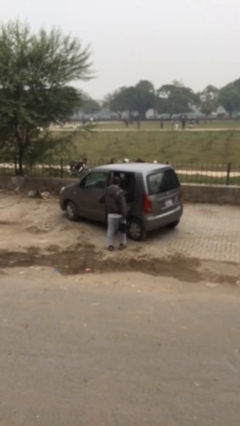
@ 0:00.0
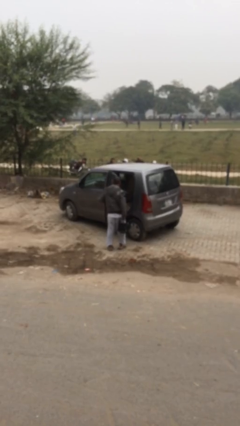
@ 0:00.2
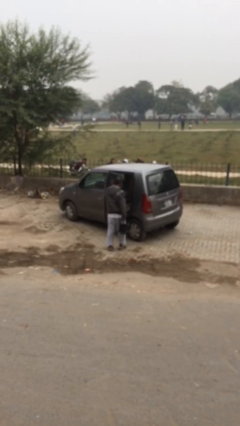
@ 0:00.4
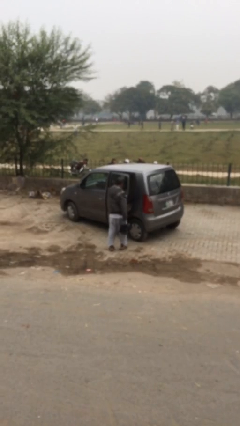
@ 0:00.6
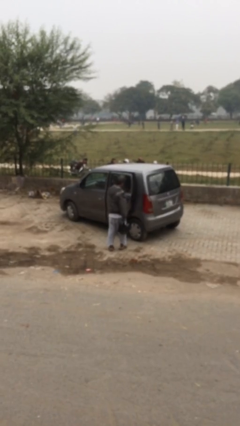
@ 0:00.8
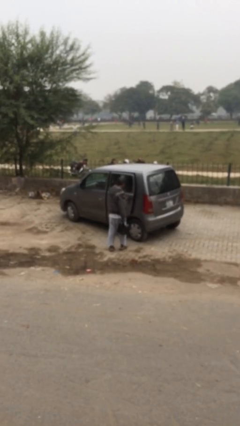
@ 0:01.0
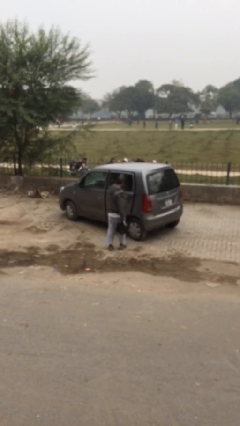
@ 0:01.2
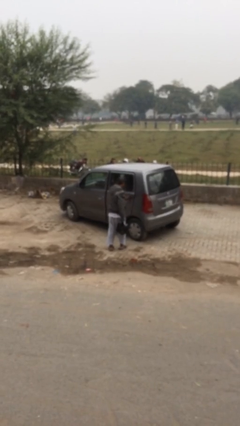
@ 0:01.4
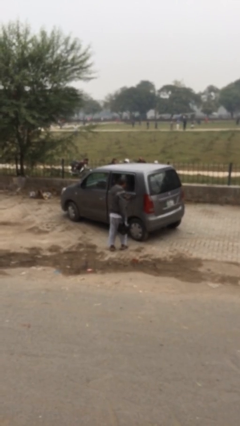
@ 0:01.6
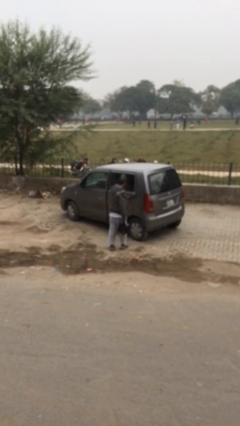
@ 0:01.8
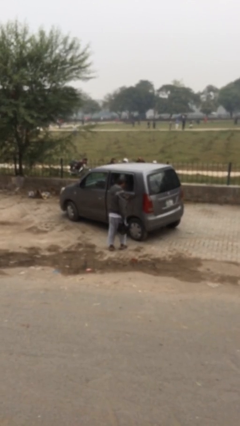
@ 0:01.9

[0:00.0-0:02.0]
person closes car door

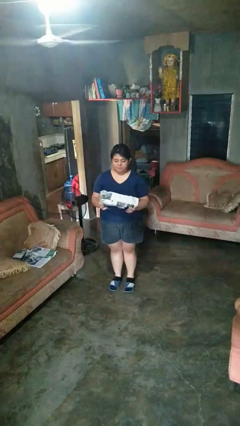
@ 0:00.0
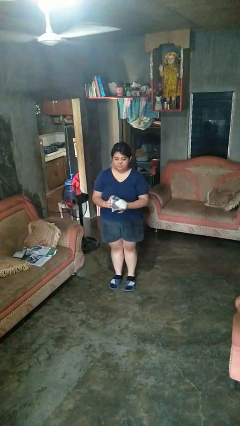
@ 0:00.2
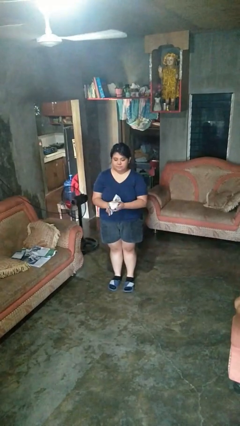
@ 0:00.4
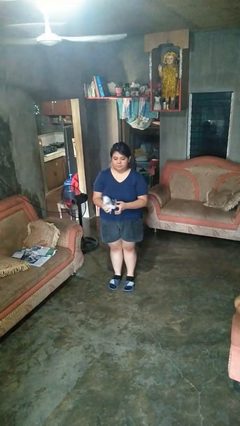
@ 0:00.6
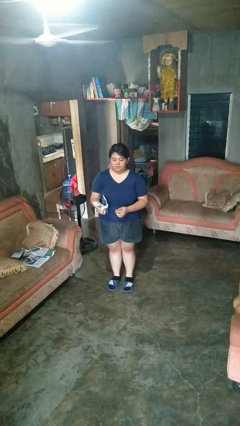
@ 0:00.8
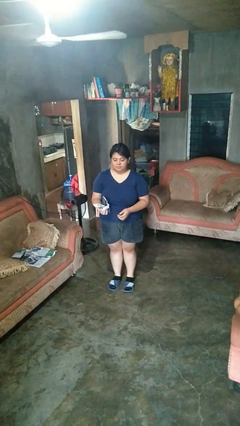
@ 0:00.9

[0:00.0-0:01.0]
person crumples paper

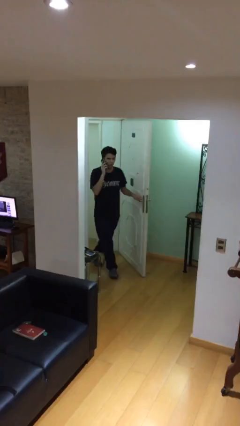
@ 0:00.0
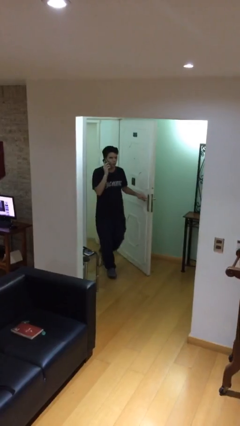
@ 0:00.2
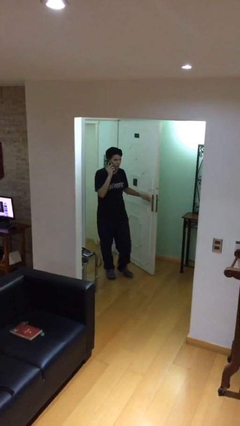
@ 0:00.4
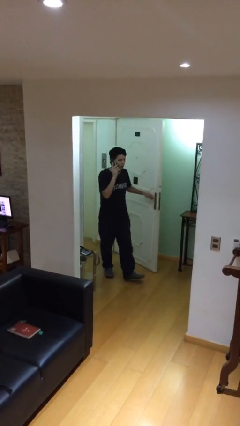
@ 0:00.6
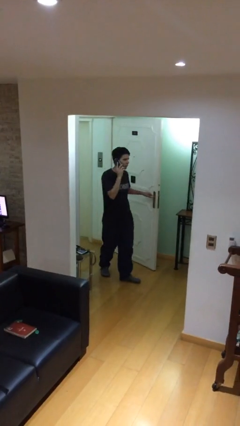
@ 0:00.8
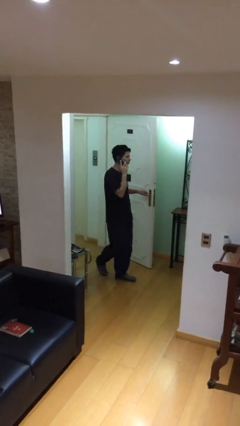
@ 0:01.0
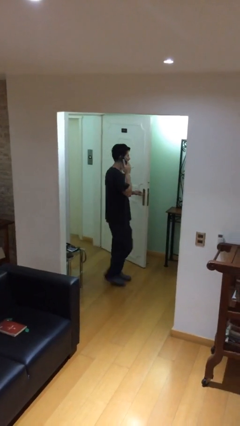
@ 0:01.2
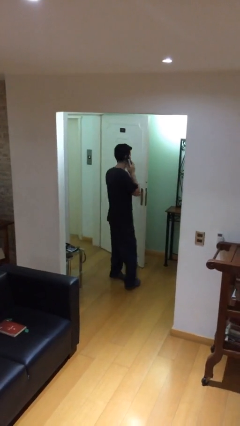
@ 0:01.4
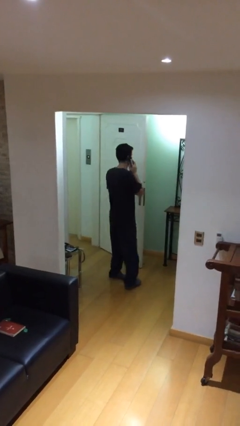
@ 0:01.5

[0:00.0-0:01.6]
person enters scene through structure

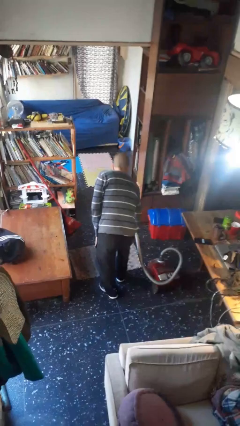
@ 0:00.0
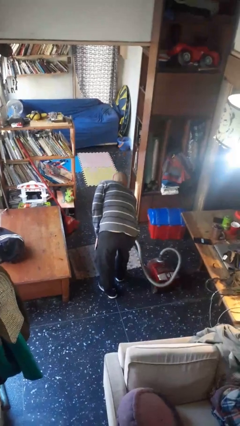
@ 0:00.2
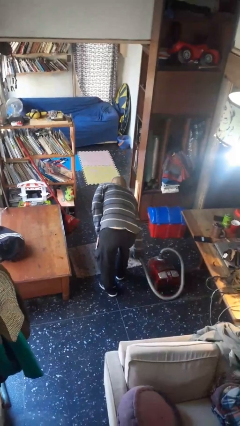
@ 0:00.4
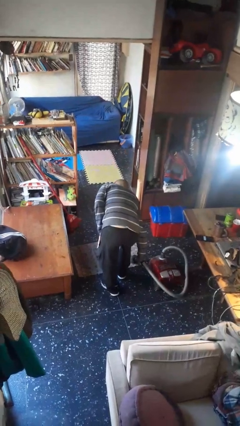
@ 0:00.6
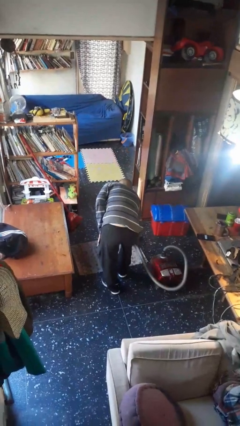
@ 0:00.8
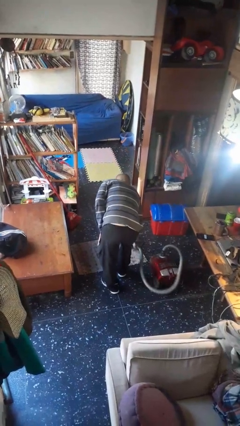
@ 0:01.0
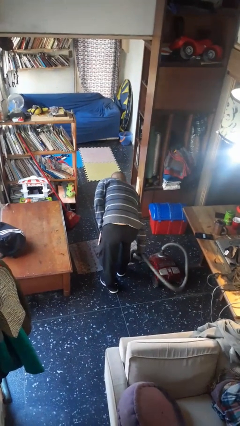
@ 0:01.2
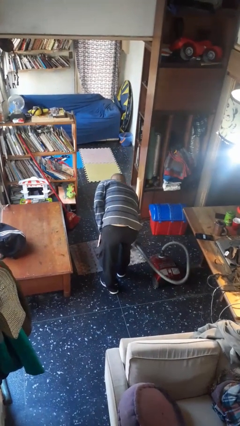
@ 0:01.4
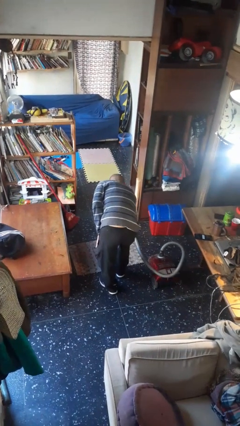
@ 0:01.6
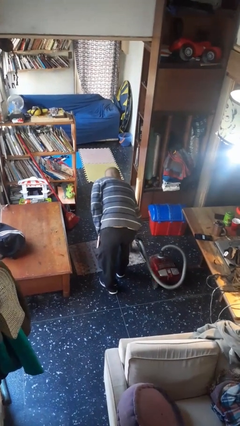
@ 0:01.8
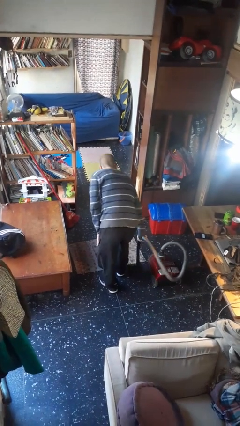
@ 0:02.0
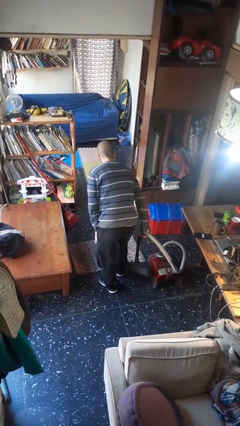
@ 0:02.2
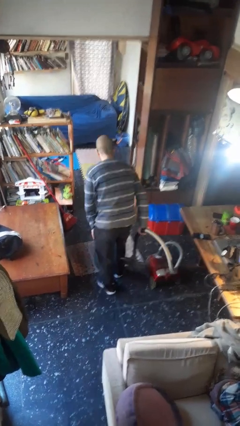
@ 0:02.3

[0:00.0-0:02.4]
person vacuums carpet

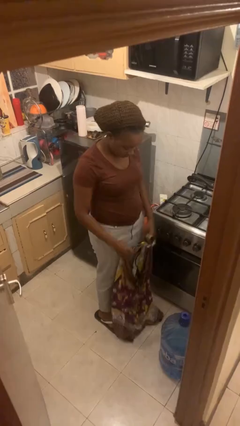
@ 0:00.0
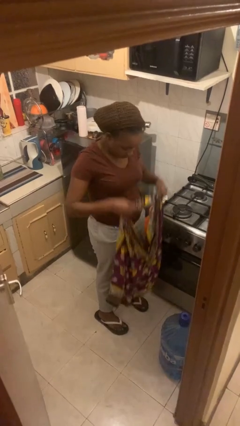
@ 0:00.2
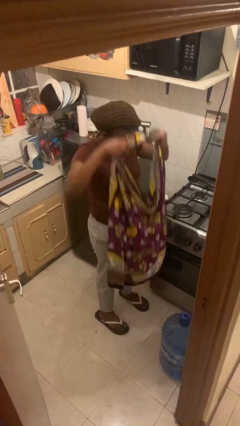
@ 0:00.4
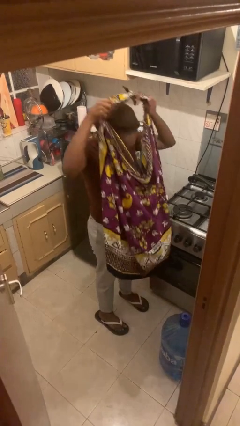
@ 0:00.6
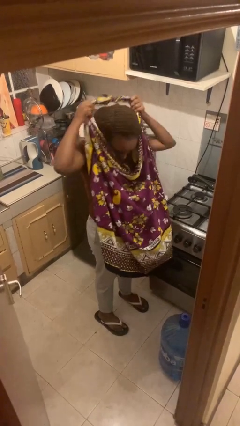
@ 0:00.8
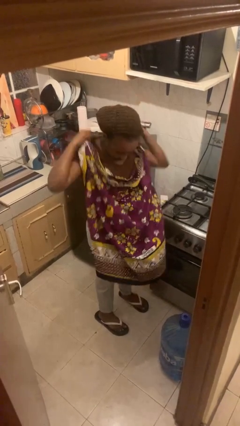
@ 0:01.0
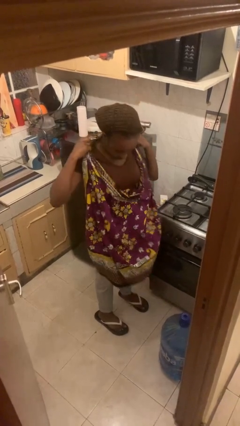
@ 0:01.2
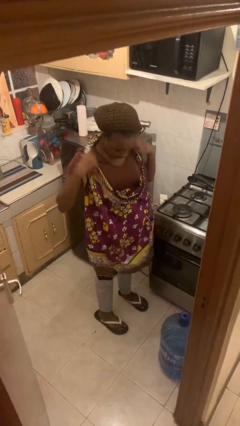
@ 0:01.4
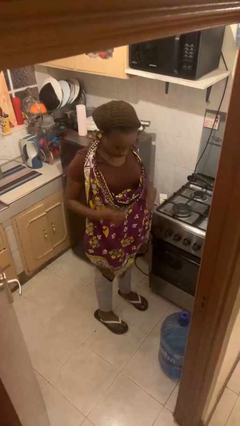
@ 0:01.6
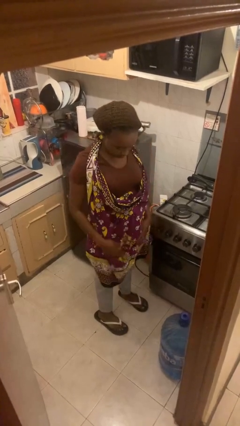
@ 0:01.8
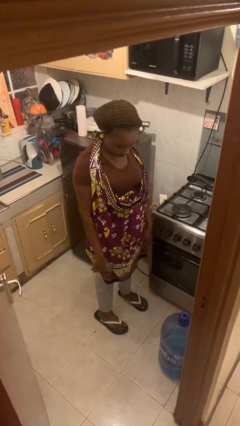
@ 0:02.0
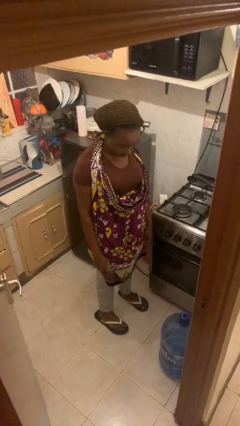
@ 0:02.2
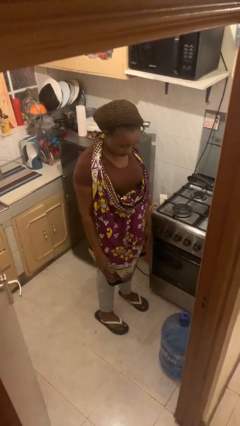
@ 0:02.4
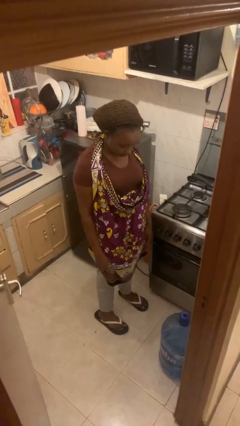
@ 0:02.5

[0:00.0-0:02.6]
person puts on apron

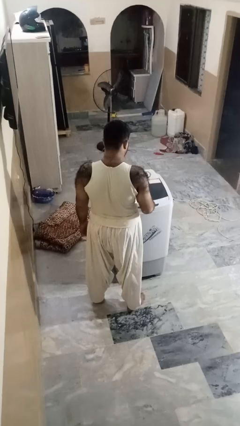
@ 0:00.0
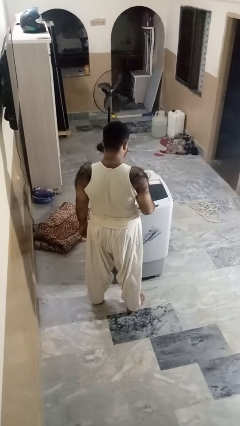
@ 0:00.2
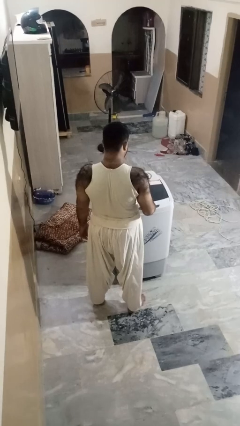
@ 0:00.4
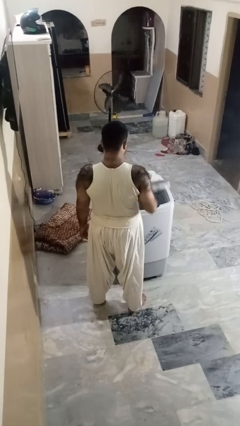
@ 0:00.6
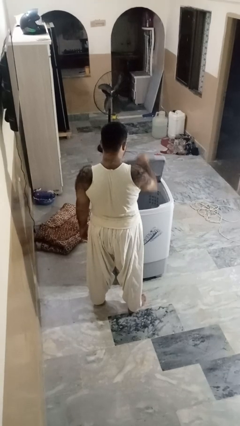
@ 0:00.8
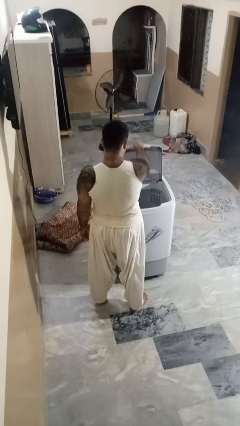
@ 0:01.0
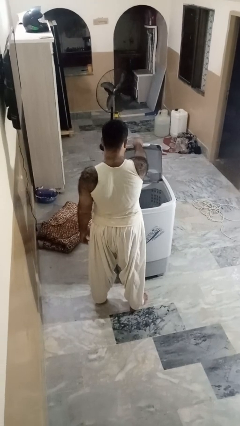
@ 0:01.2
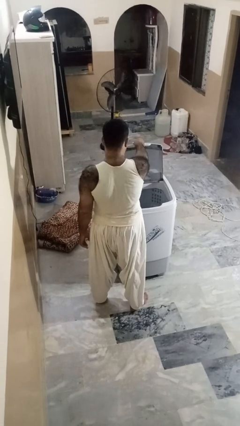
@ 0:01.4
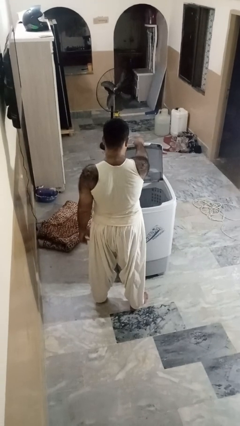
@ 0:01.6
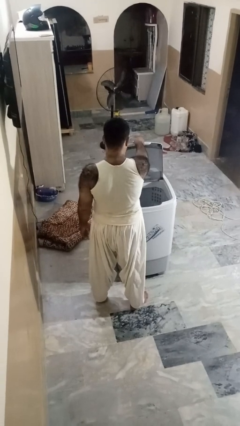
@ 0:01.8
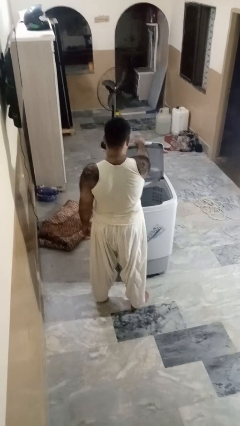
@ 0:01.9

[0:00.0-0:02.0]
person opens clothes washer

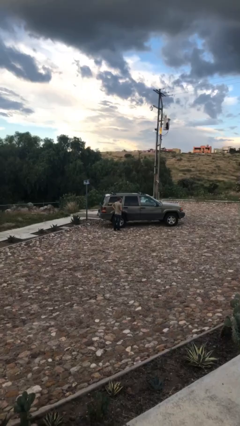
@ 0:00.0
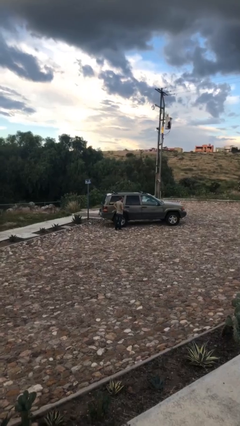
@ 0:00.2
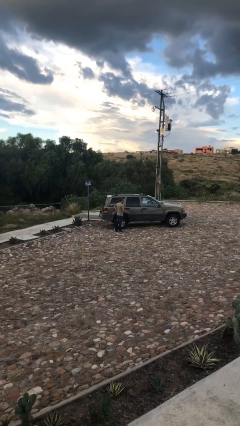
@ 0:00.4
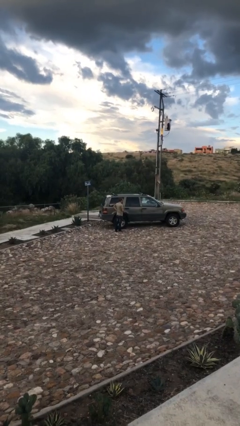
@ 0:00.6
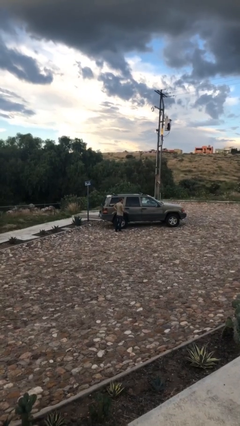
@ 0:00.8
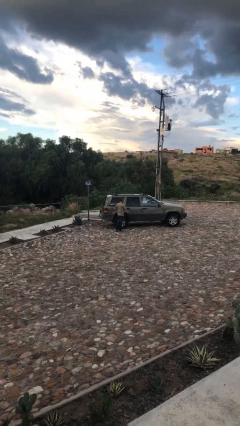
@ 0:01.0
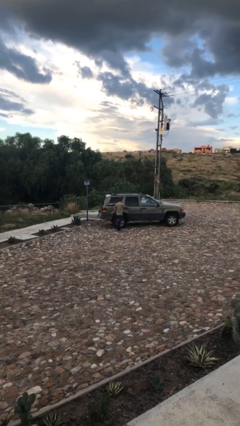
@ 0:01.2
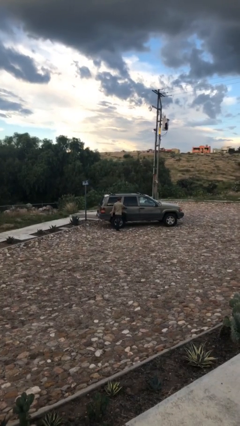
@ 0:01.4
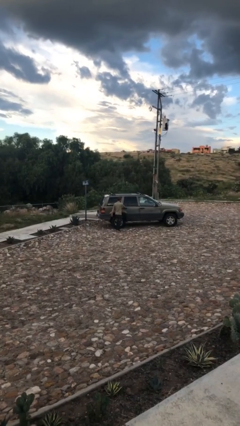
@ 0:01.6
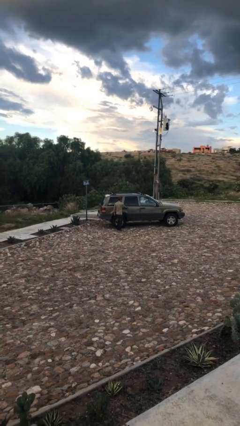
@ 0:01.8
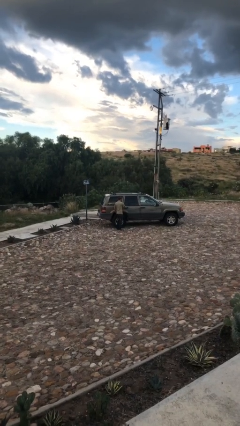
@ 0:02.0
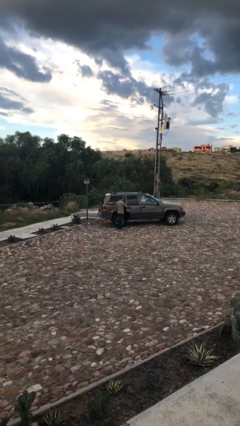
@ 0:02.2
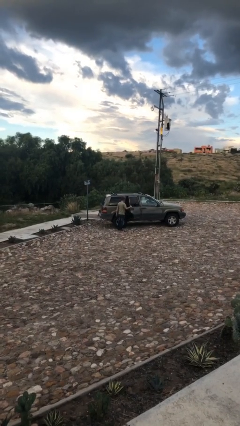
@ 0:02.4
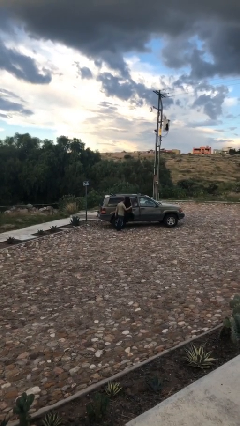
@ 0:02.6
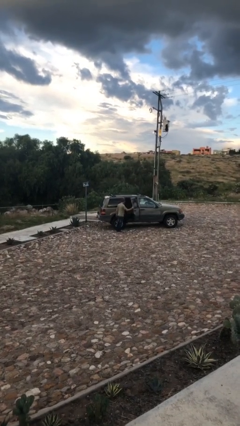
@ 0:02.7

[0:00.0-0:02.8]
person opens car door

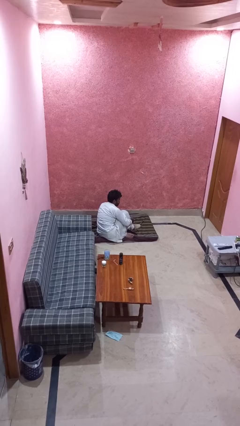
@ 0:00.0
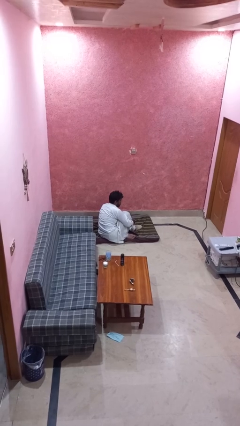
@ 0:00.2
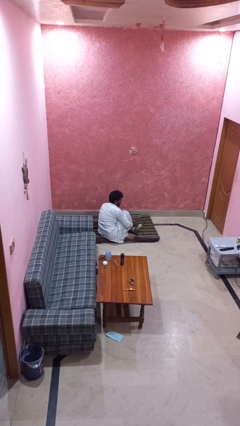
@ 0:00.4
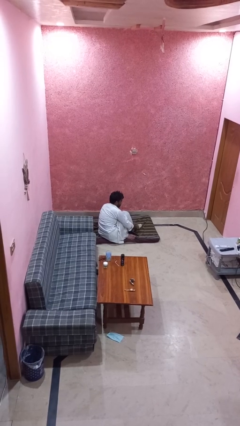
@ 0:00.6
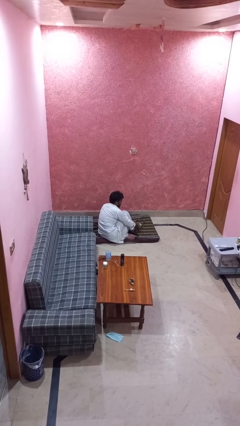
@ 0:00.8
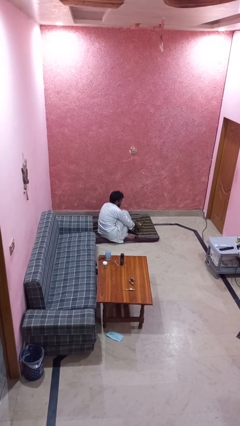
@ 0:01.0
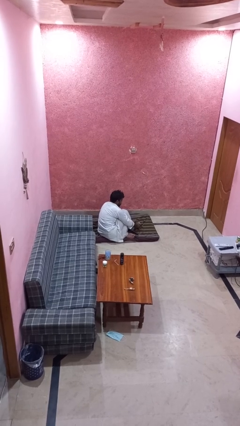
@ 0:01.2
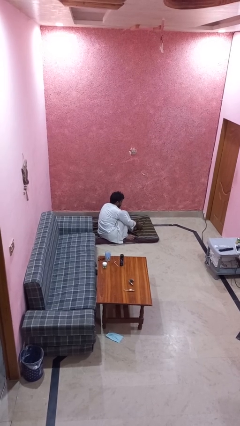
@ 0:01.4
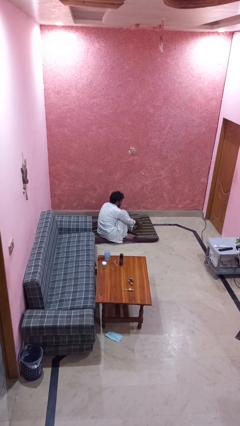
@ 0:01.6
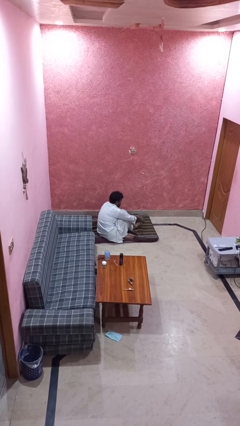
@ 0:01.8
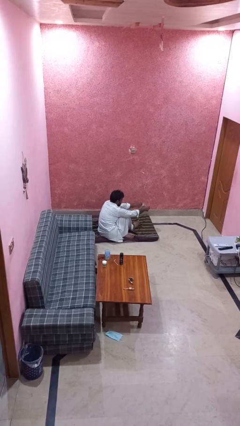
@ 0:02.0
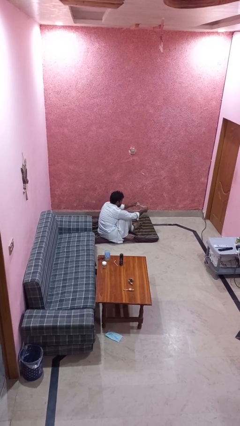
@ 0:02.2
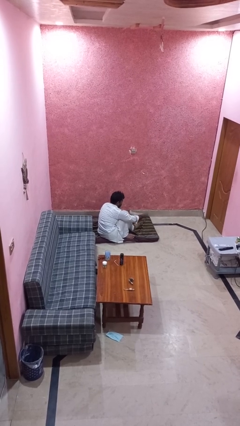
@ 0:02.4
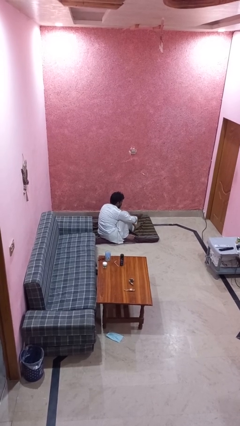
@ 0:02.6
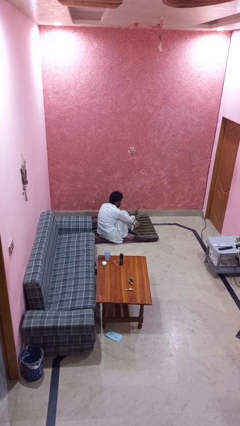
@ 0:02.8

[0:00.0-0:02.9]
person takes off socks
